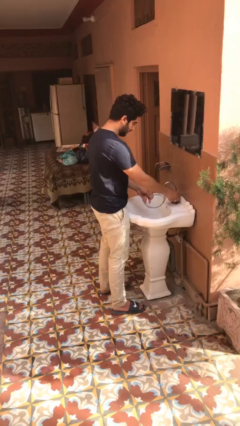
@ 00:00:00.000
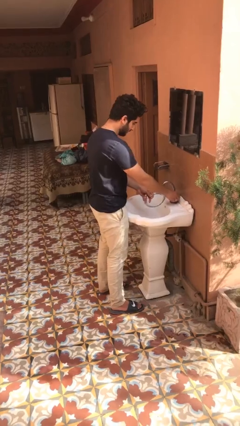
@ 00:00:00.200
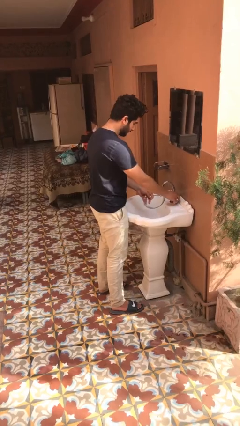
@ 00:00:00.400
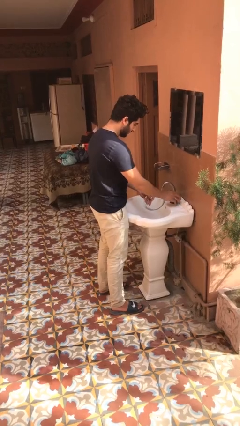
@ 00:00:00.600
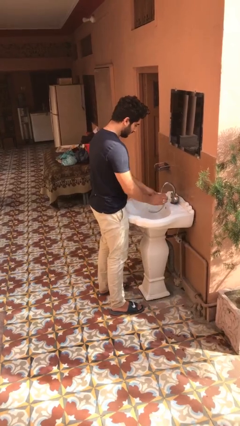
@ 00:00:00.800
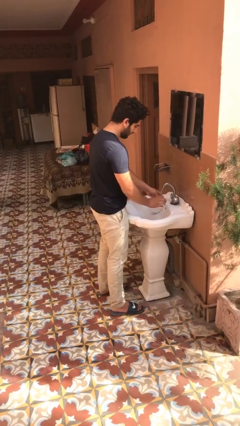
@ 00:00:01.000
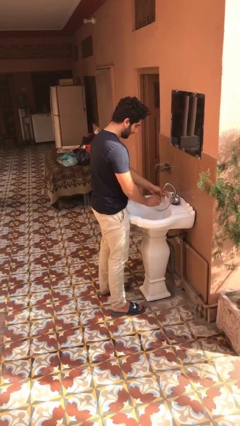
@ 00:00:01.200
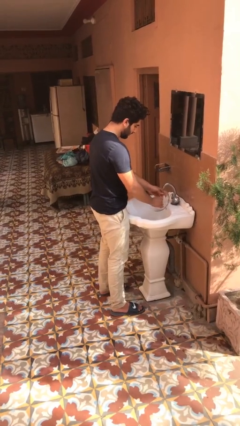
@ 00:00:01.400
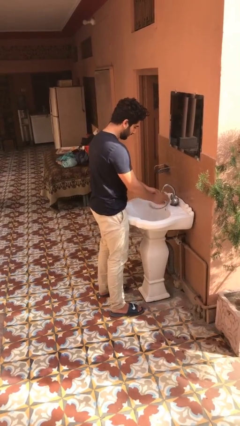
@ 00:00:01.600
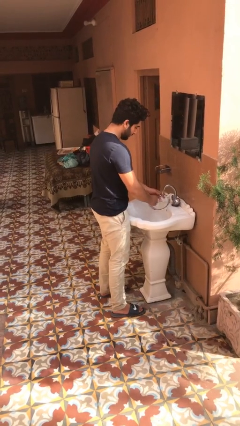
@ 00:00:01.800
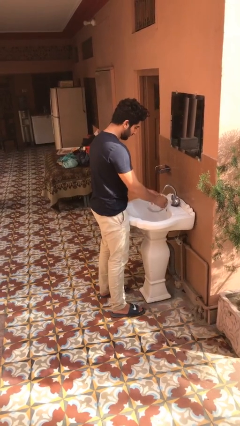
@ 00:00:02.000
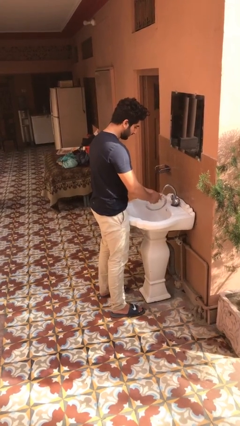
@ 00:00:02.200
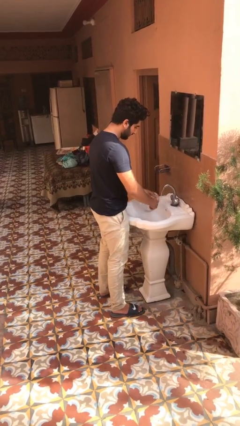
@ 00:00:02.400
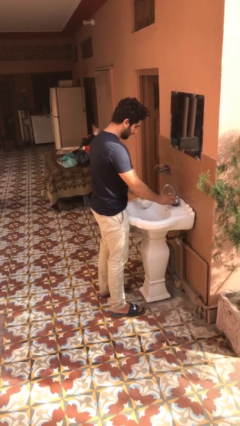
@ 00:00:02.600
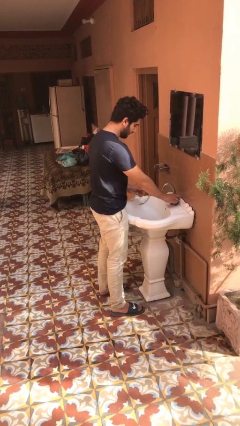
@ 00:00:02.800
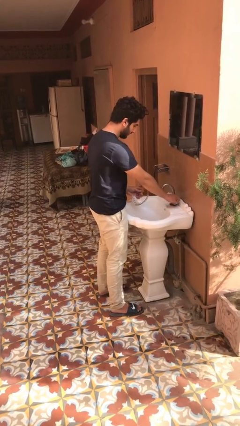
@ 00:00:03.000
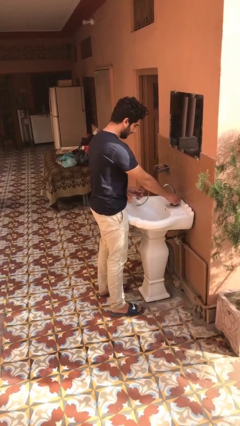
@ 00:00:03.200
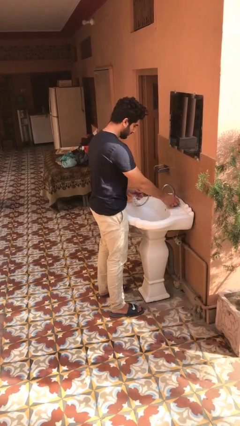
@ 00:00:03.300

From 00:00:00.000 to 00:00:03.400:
person washes dish

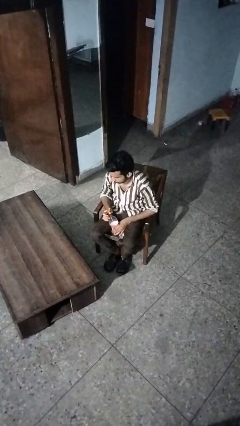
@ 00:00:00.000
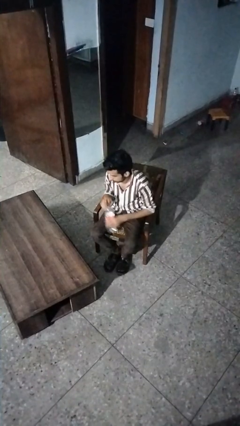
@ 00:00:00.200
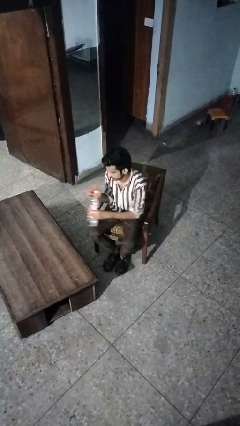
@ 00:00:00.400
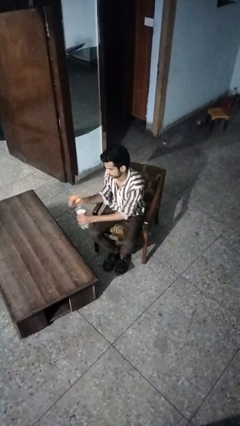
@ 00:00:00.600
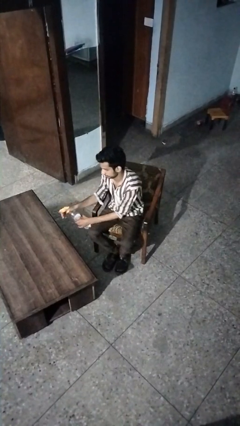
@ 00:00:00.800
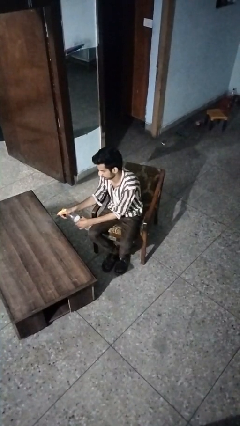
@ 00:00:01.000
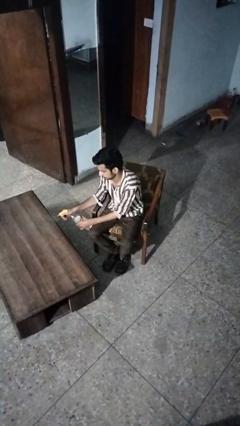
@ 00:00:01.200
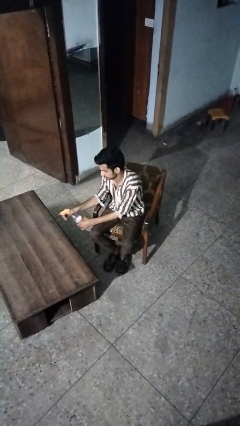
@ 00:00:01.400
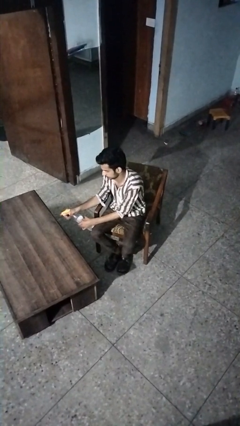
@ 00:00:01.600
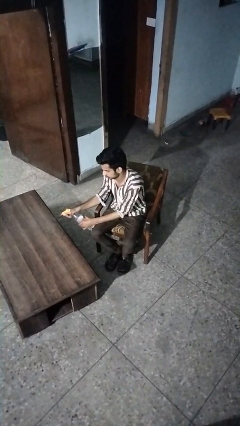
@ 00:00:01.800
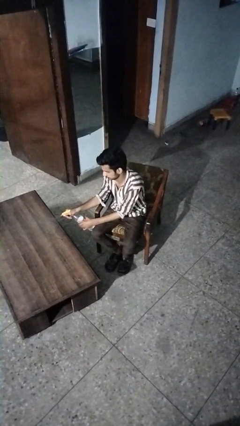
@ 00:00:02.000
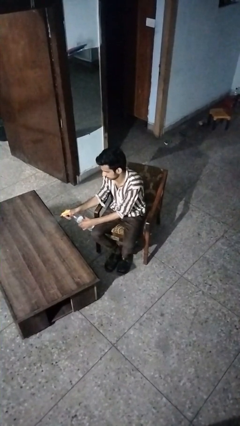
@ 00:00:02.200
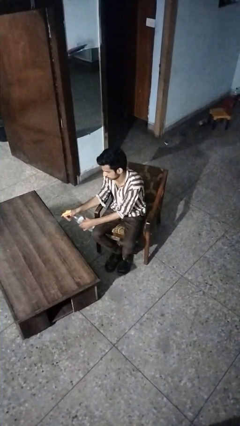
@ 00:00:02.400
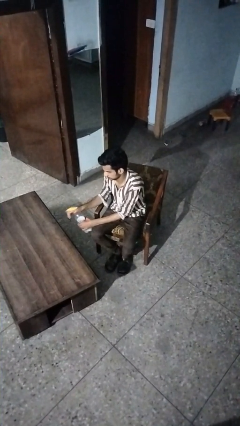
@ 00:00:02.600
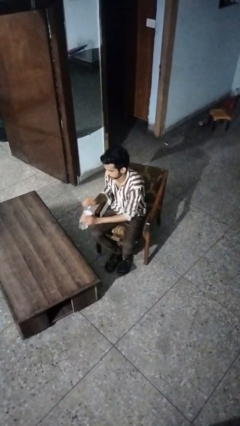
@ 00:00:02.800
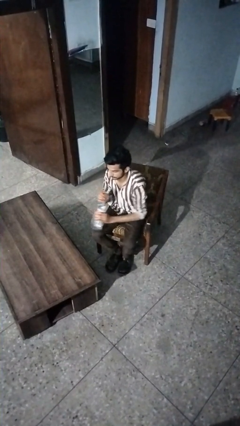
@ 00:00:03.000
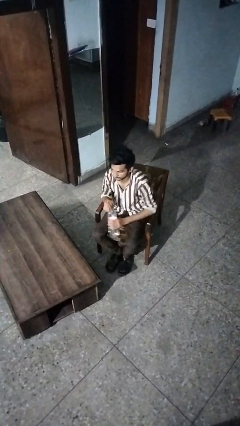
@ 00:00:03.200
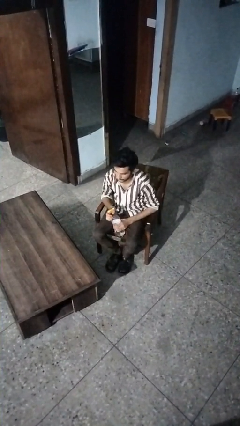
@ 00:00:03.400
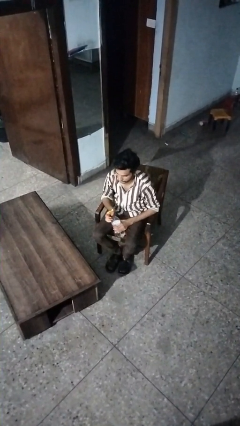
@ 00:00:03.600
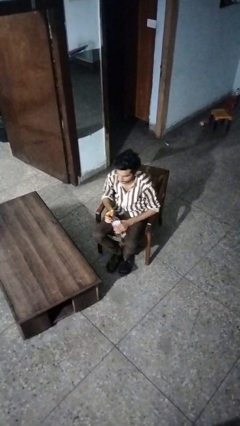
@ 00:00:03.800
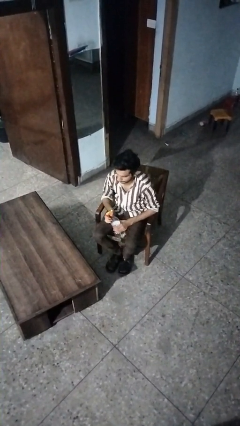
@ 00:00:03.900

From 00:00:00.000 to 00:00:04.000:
person sprays from bottle

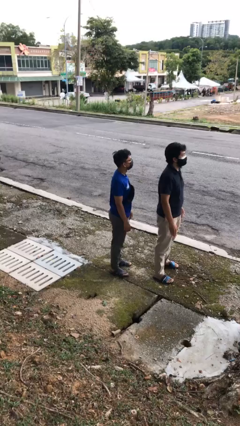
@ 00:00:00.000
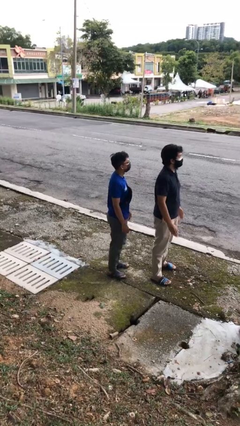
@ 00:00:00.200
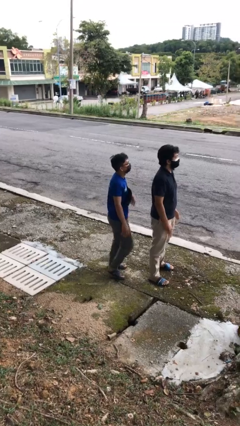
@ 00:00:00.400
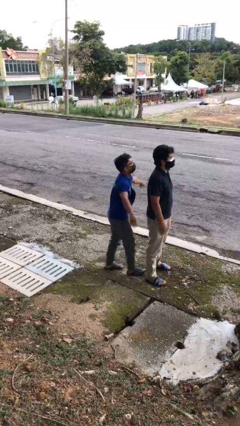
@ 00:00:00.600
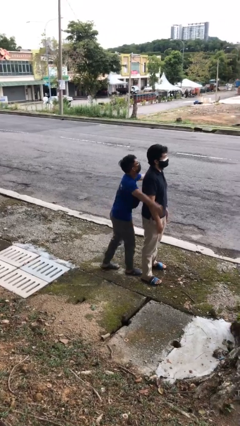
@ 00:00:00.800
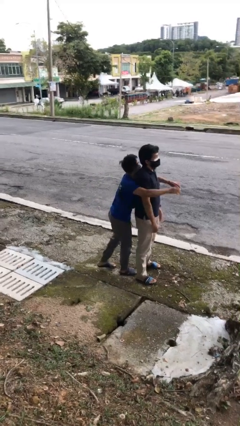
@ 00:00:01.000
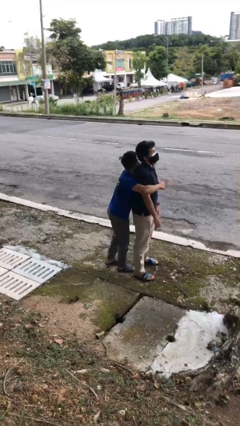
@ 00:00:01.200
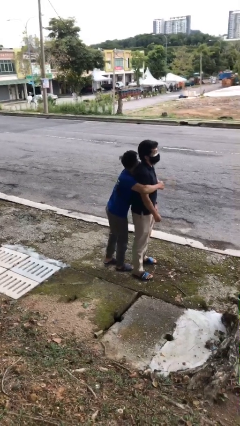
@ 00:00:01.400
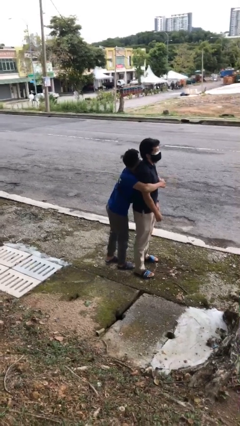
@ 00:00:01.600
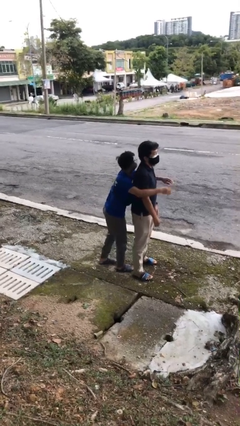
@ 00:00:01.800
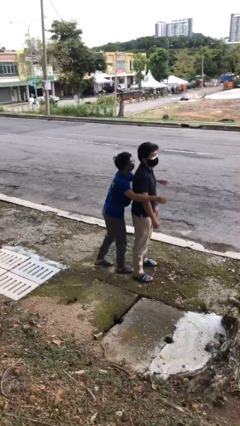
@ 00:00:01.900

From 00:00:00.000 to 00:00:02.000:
person hugs person from behind

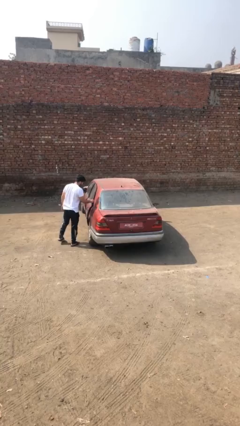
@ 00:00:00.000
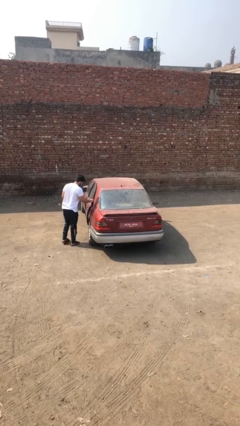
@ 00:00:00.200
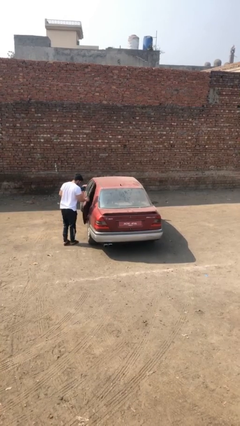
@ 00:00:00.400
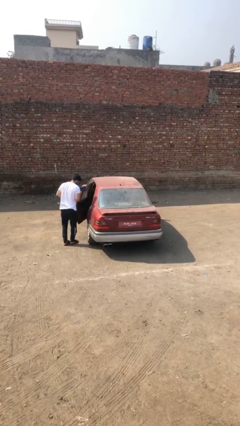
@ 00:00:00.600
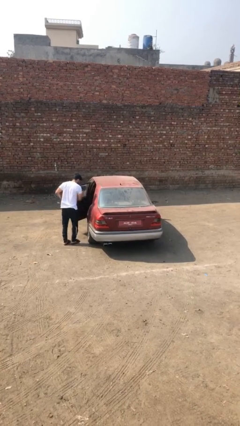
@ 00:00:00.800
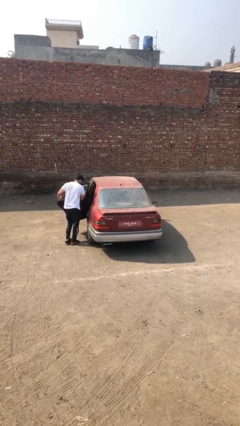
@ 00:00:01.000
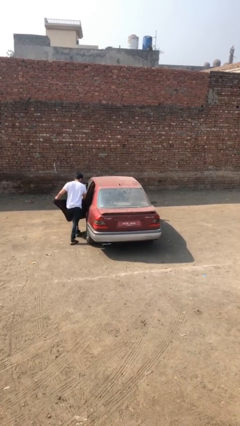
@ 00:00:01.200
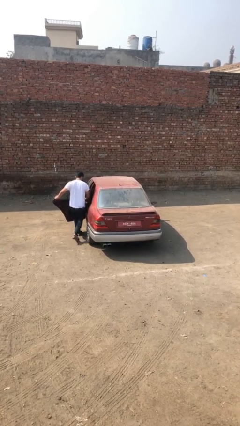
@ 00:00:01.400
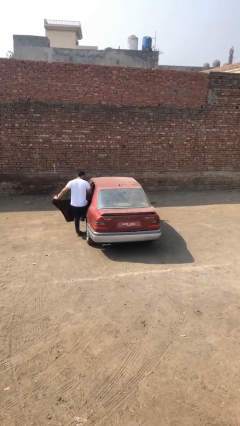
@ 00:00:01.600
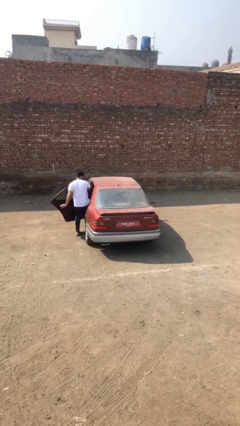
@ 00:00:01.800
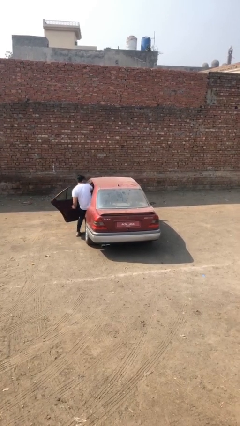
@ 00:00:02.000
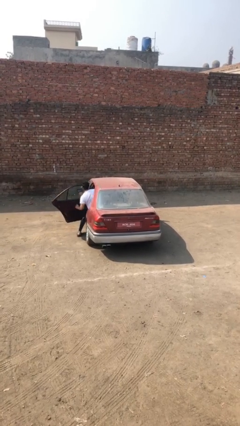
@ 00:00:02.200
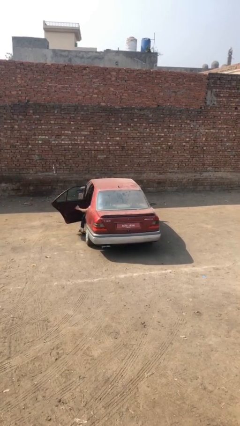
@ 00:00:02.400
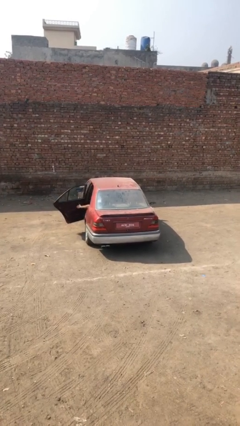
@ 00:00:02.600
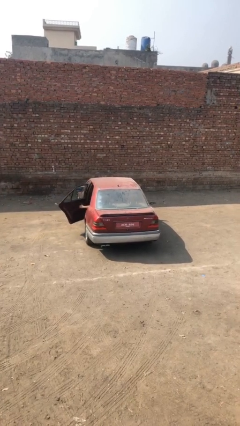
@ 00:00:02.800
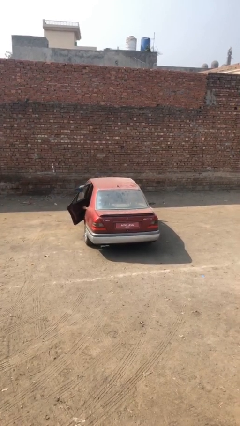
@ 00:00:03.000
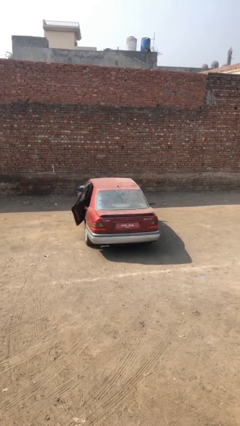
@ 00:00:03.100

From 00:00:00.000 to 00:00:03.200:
car picks up person

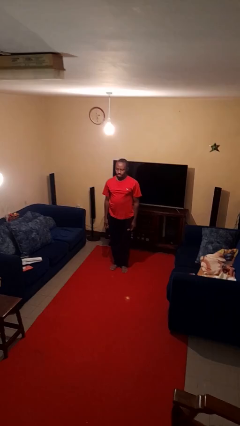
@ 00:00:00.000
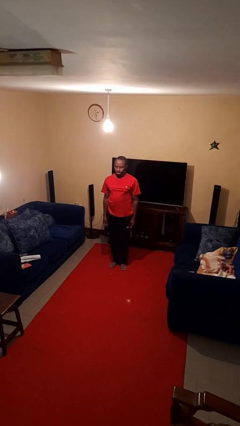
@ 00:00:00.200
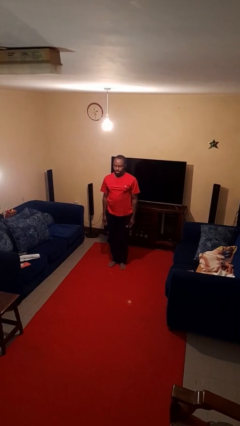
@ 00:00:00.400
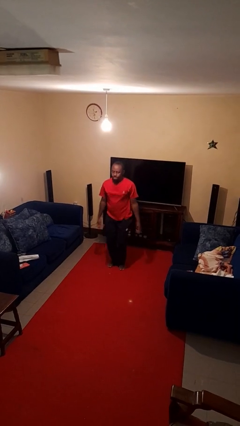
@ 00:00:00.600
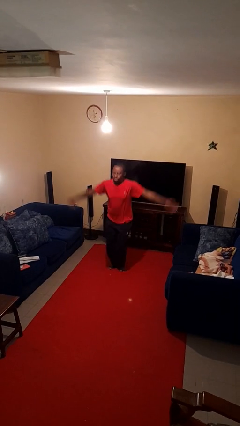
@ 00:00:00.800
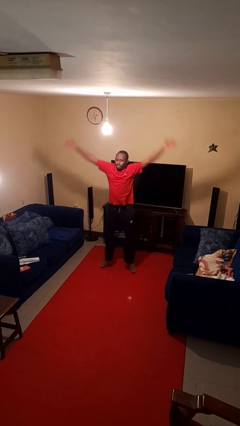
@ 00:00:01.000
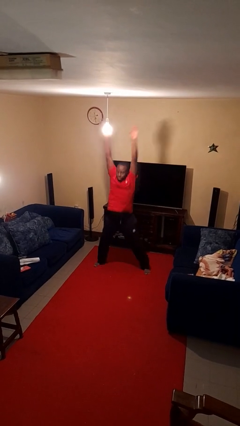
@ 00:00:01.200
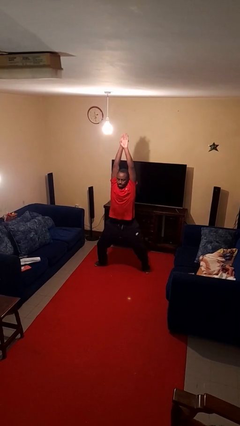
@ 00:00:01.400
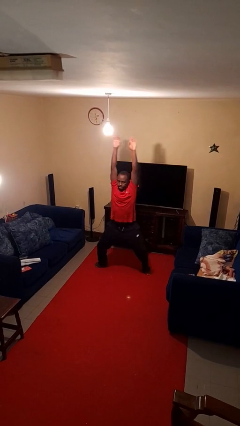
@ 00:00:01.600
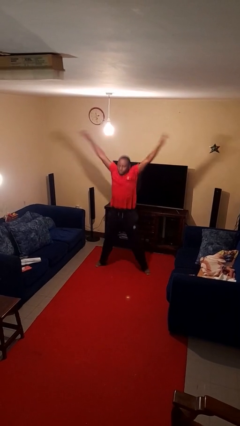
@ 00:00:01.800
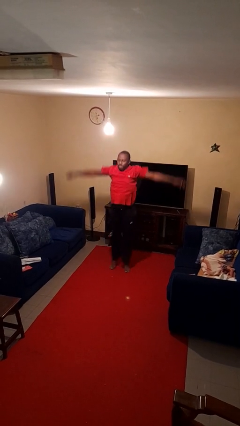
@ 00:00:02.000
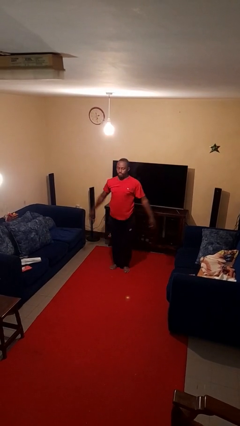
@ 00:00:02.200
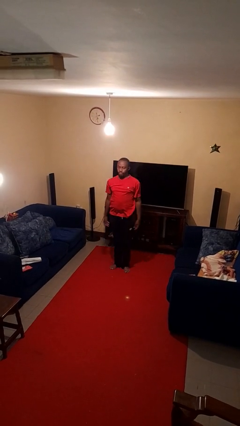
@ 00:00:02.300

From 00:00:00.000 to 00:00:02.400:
person exercises with jumping jacks

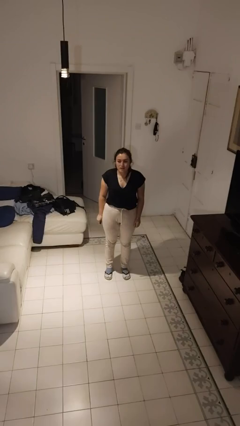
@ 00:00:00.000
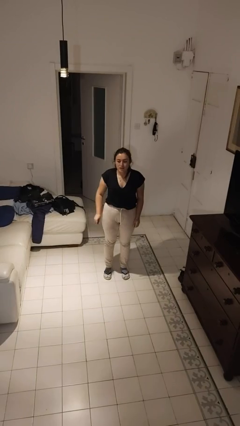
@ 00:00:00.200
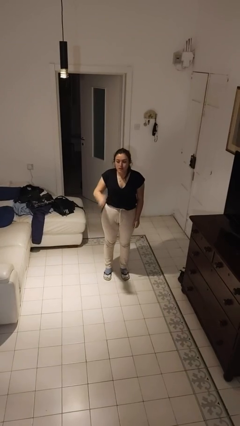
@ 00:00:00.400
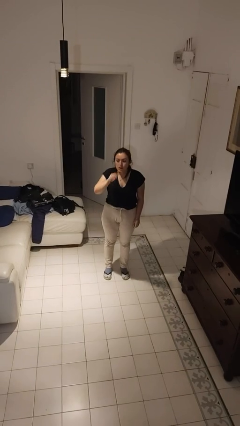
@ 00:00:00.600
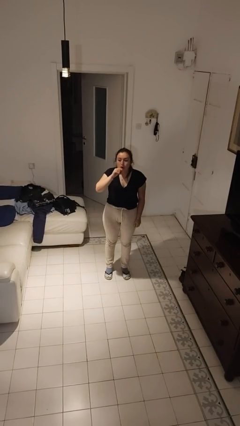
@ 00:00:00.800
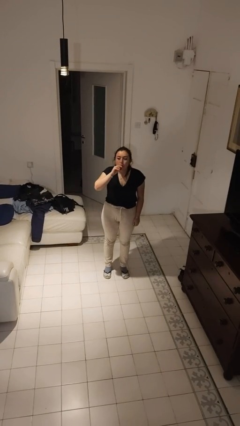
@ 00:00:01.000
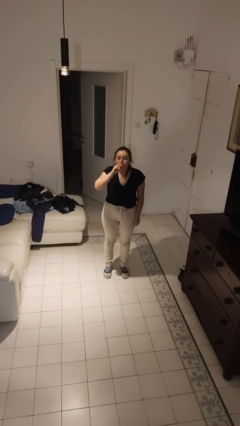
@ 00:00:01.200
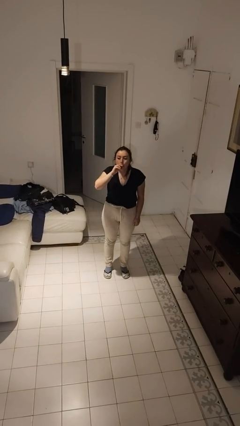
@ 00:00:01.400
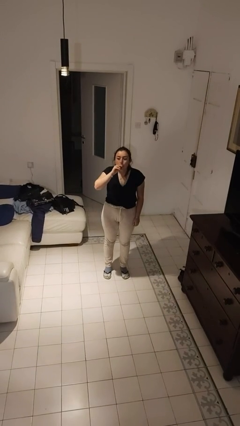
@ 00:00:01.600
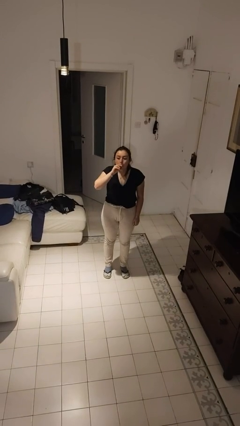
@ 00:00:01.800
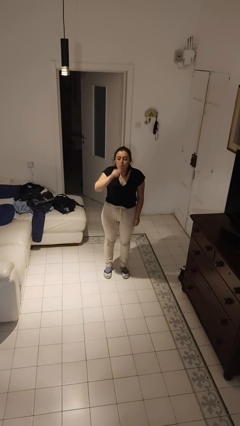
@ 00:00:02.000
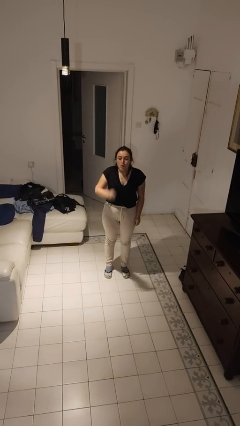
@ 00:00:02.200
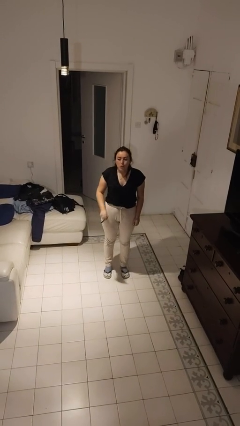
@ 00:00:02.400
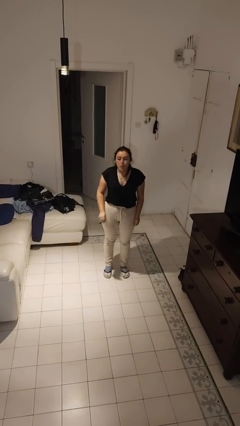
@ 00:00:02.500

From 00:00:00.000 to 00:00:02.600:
person vapes
